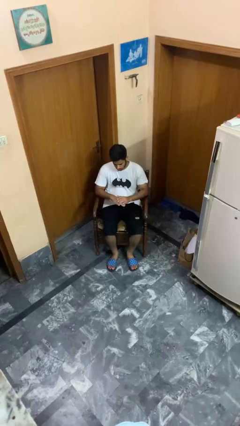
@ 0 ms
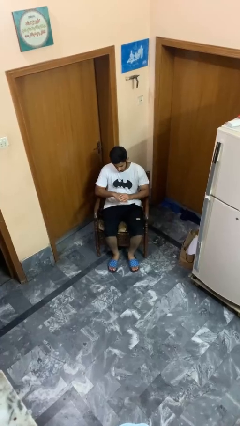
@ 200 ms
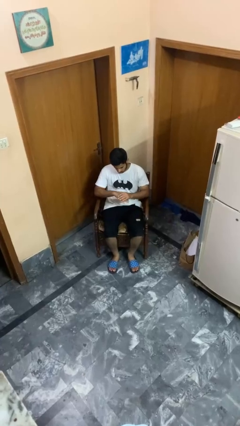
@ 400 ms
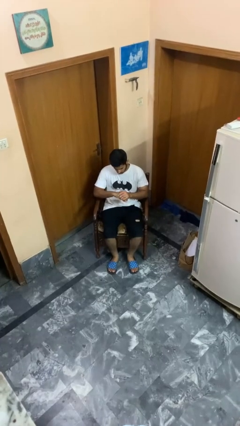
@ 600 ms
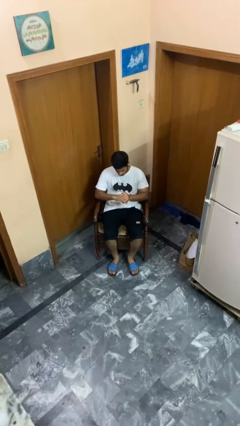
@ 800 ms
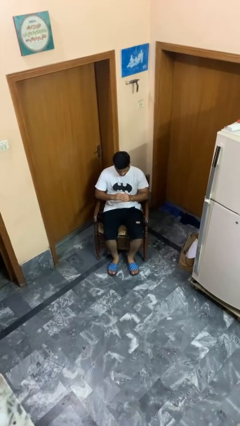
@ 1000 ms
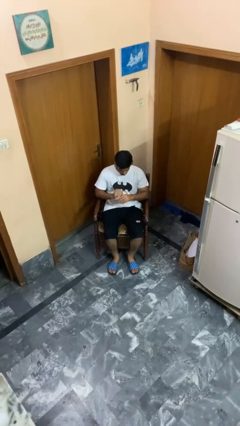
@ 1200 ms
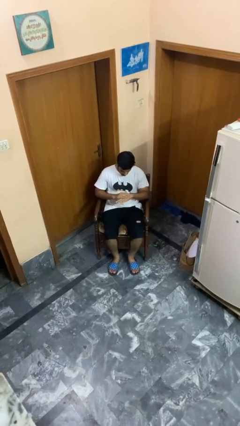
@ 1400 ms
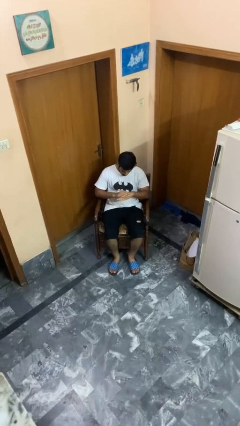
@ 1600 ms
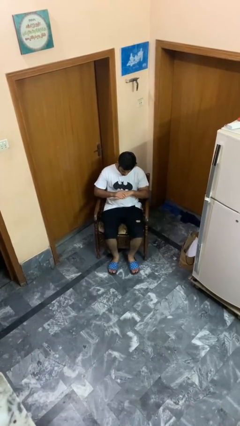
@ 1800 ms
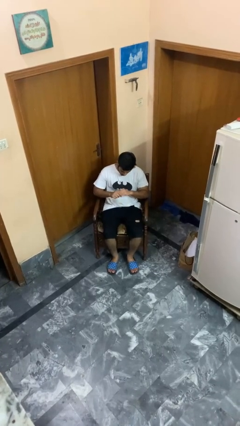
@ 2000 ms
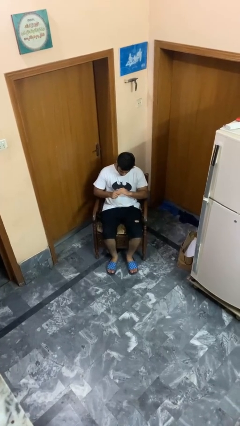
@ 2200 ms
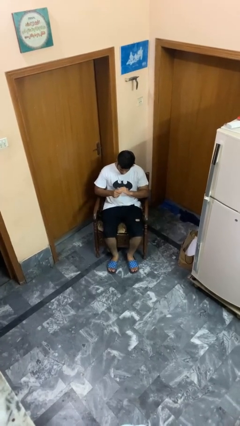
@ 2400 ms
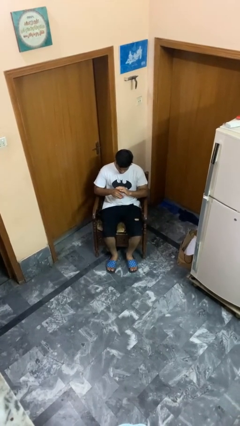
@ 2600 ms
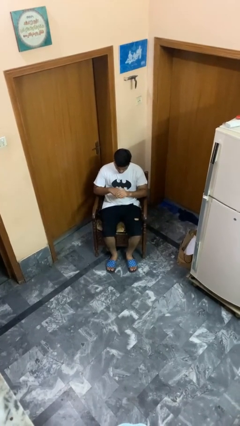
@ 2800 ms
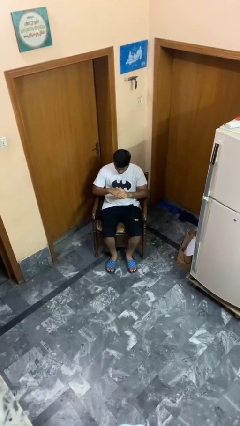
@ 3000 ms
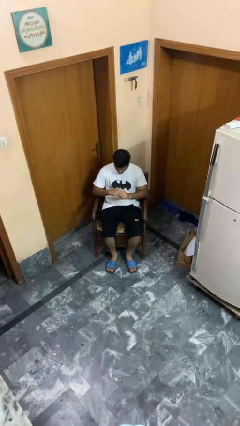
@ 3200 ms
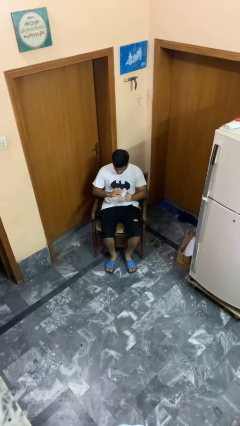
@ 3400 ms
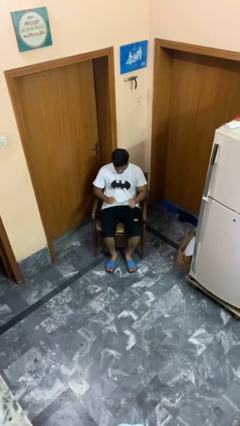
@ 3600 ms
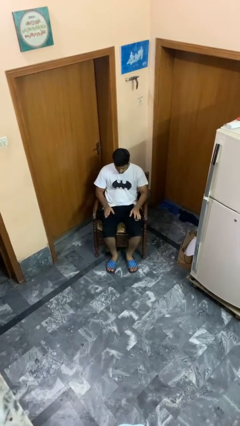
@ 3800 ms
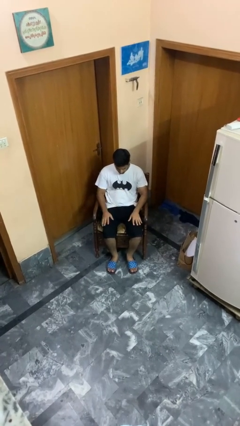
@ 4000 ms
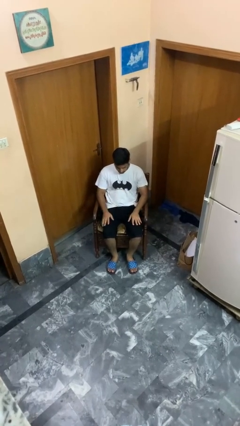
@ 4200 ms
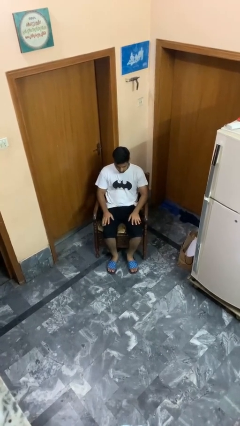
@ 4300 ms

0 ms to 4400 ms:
person looks at hands in lap

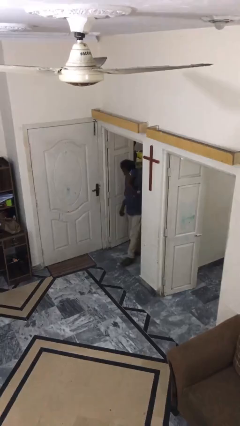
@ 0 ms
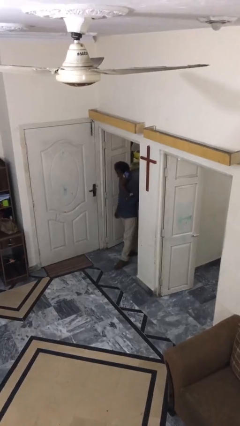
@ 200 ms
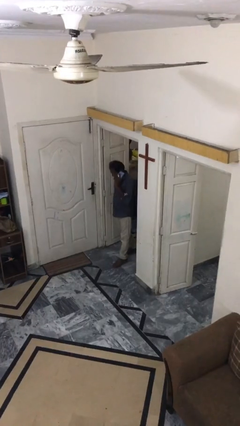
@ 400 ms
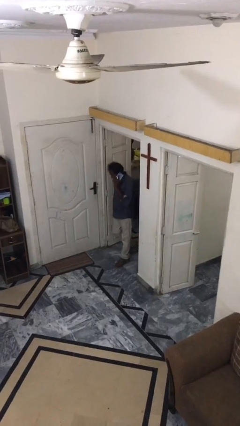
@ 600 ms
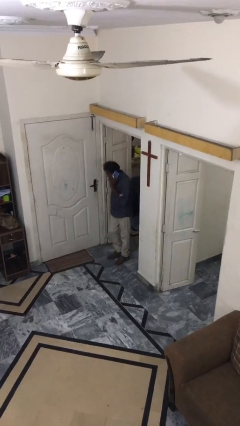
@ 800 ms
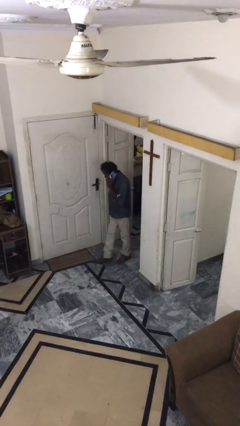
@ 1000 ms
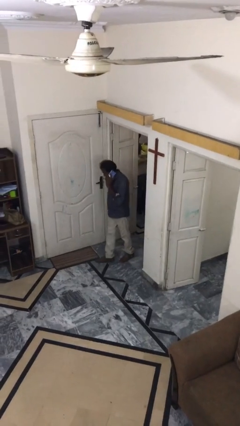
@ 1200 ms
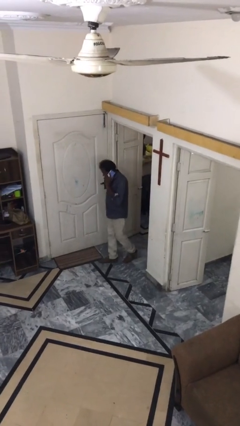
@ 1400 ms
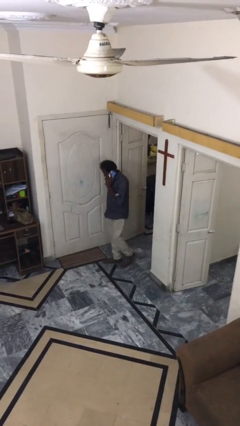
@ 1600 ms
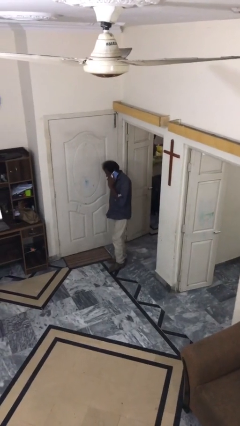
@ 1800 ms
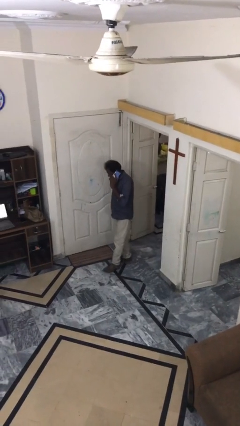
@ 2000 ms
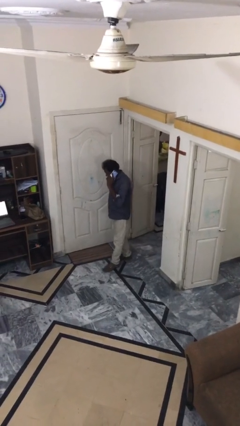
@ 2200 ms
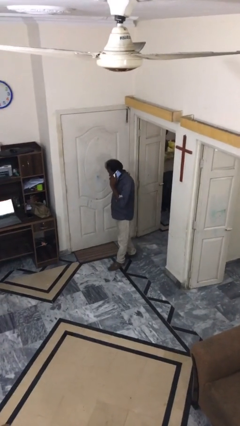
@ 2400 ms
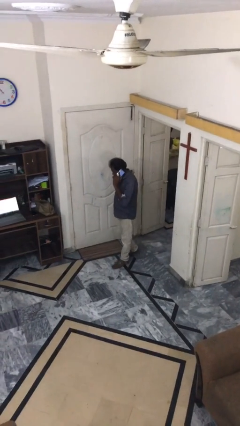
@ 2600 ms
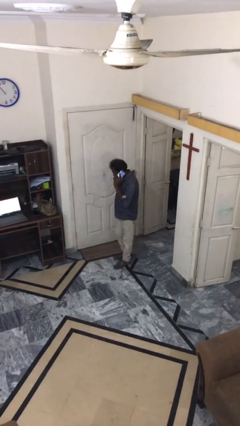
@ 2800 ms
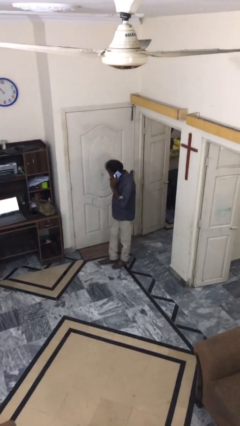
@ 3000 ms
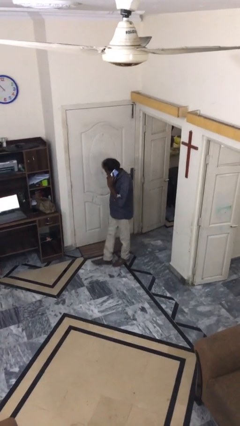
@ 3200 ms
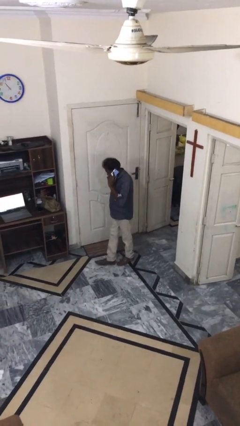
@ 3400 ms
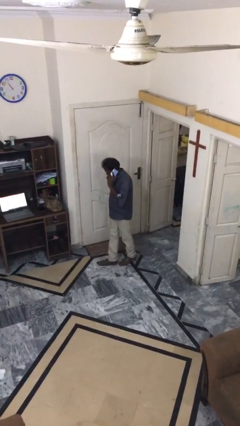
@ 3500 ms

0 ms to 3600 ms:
person enters scene through structure

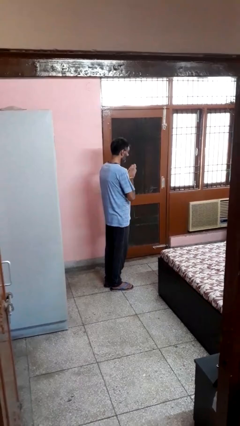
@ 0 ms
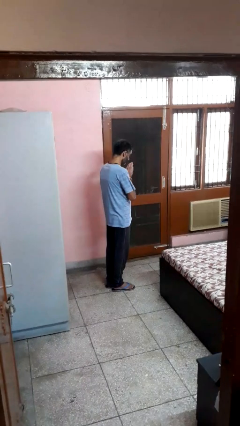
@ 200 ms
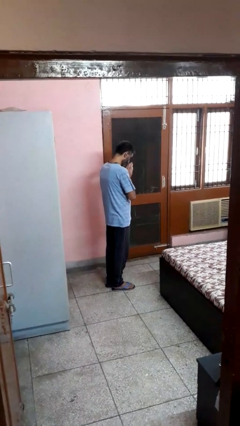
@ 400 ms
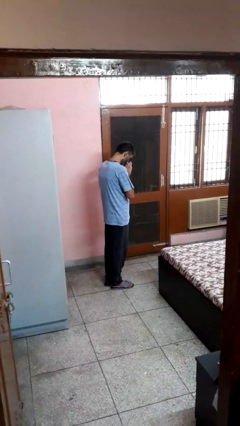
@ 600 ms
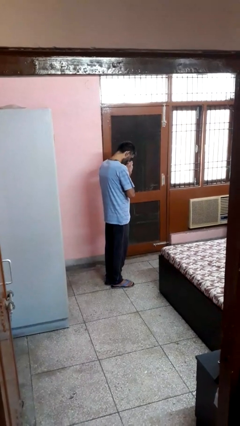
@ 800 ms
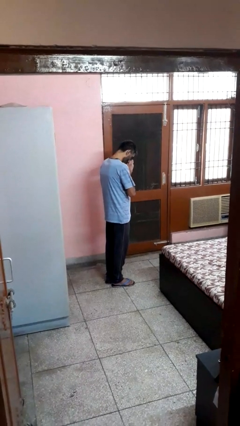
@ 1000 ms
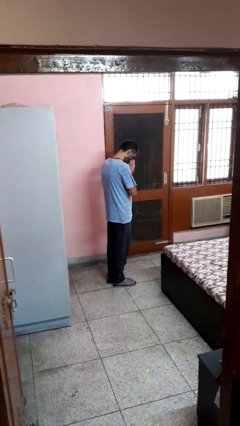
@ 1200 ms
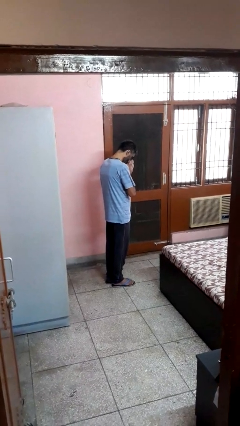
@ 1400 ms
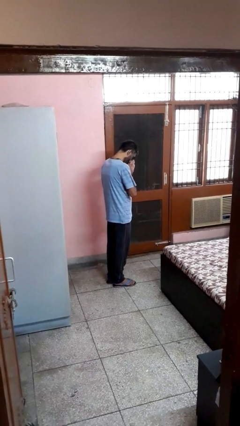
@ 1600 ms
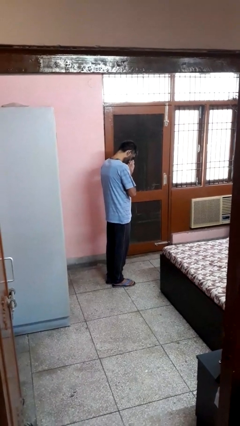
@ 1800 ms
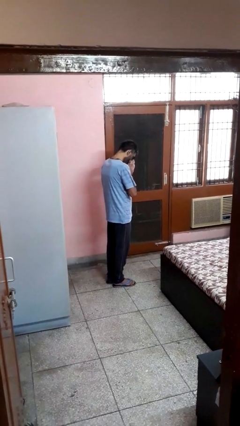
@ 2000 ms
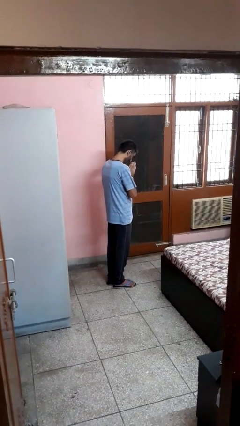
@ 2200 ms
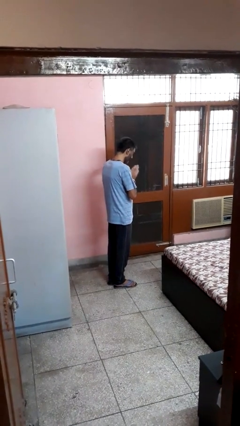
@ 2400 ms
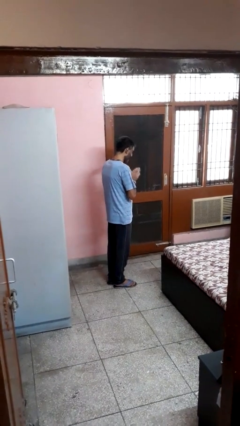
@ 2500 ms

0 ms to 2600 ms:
person prays

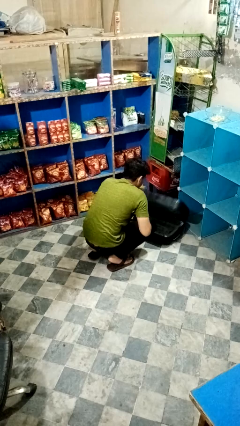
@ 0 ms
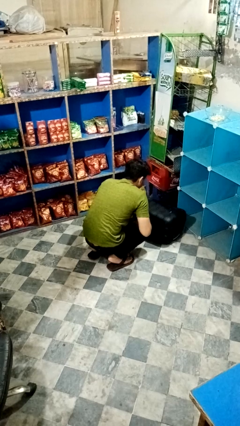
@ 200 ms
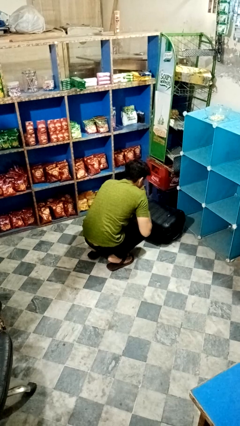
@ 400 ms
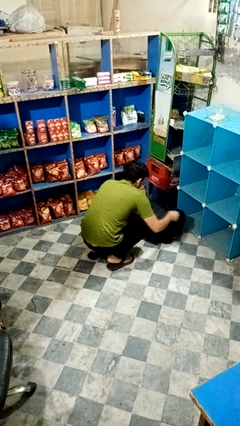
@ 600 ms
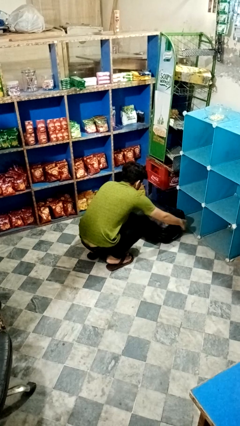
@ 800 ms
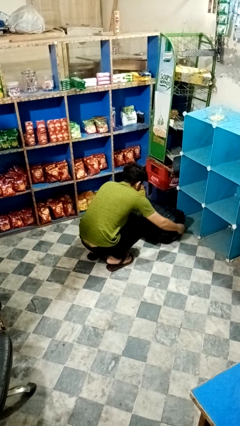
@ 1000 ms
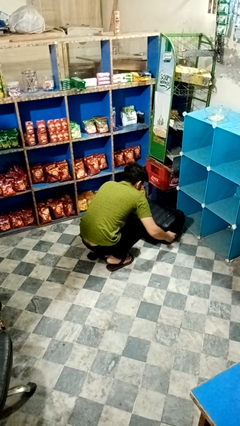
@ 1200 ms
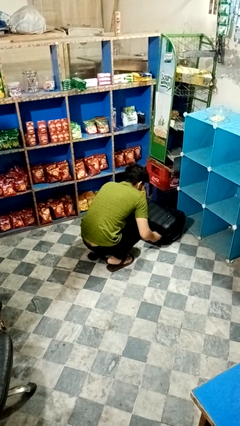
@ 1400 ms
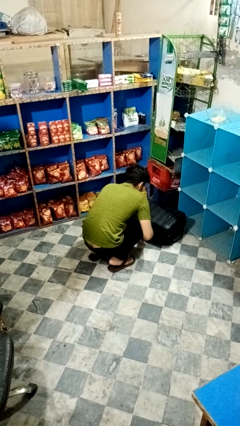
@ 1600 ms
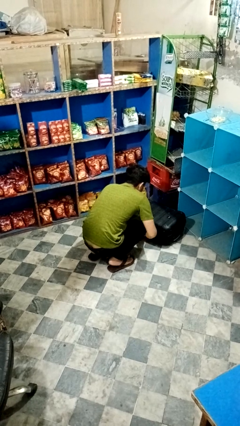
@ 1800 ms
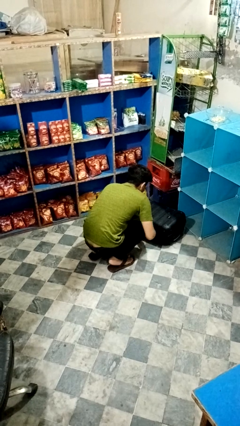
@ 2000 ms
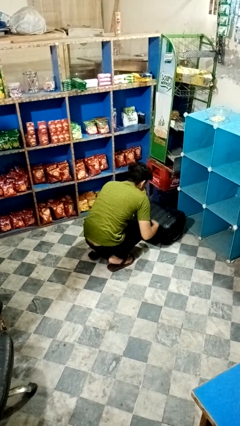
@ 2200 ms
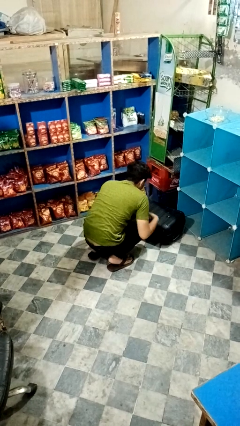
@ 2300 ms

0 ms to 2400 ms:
person closes suitcase

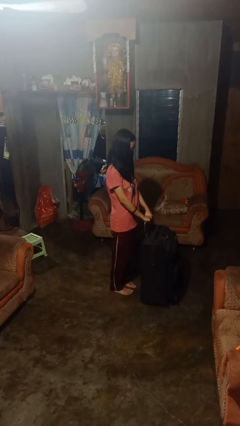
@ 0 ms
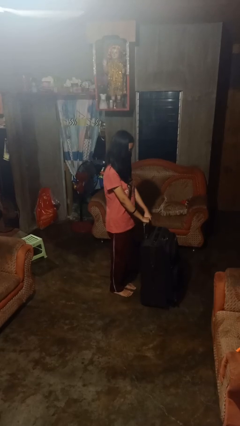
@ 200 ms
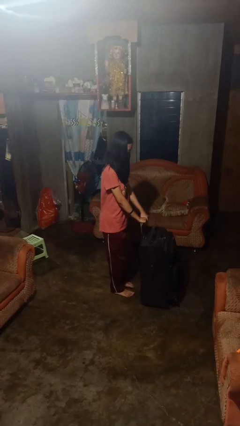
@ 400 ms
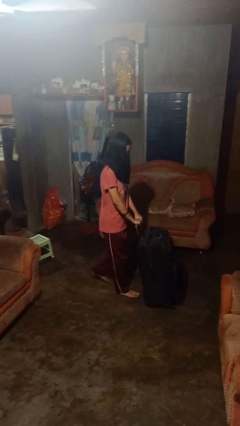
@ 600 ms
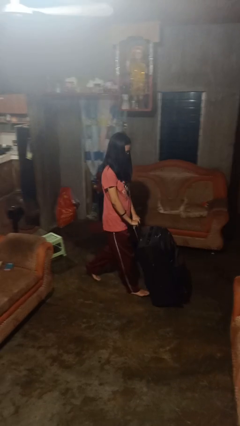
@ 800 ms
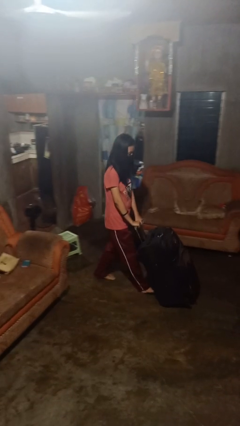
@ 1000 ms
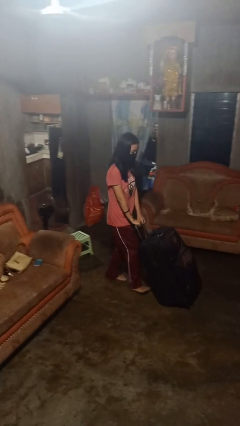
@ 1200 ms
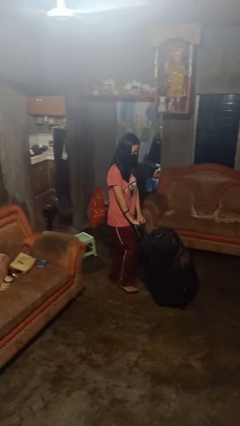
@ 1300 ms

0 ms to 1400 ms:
person pulls wheeled cart

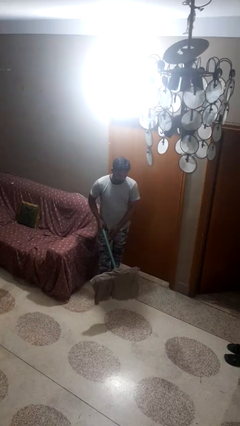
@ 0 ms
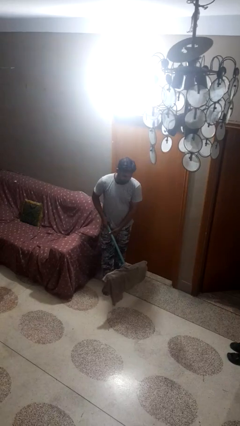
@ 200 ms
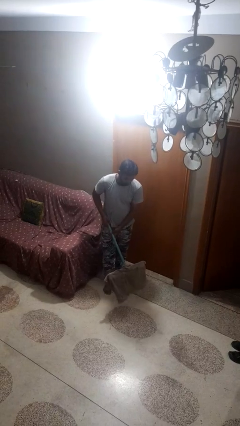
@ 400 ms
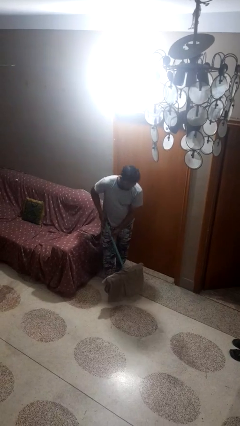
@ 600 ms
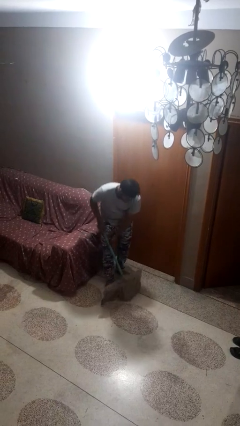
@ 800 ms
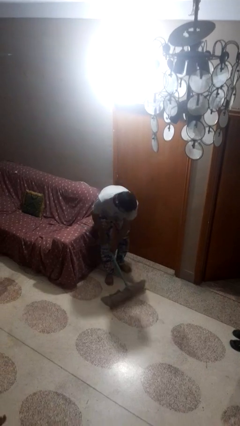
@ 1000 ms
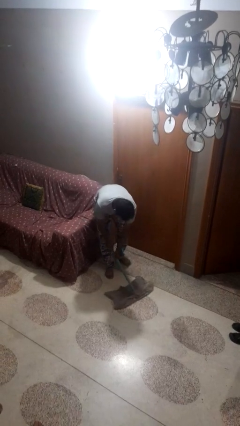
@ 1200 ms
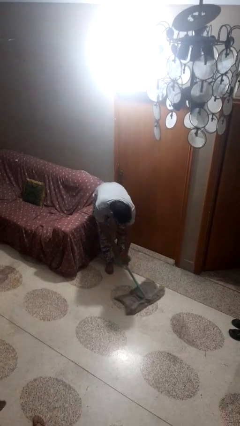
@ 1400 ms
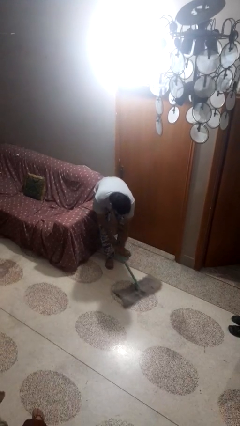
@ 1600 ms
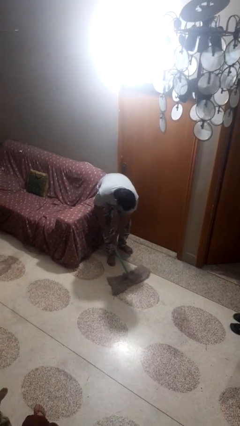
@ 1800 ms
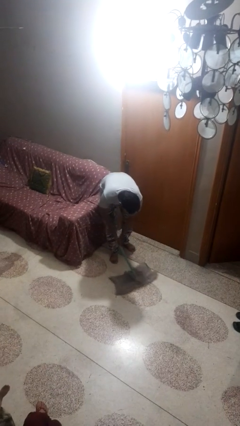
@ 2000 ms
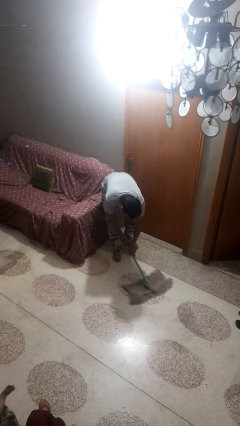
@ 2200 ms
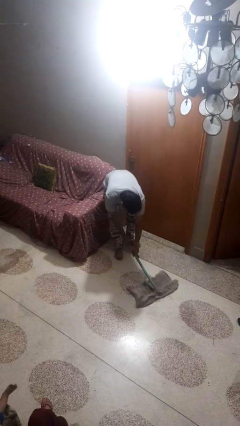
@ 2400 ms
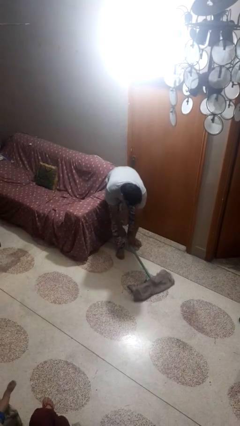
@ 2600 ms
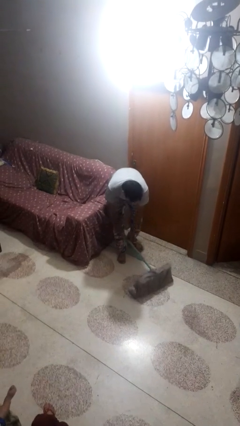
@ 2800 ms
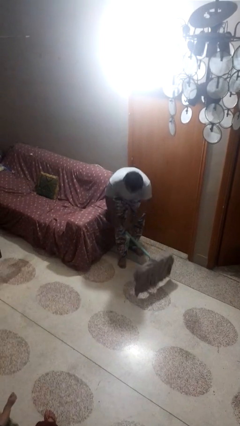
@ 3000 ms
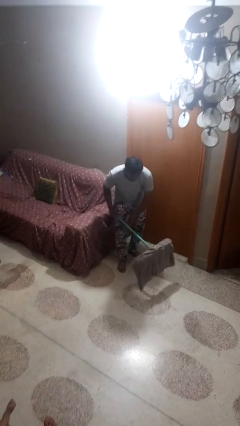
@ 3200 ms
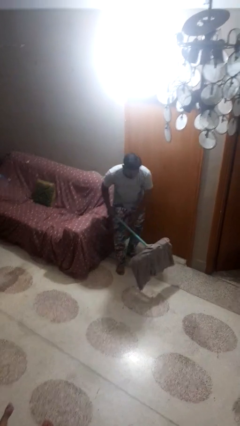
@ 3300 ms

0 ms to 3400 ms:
person mops
